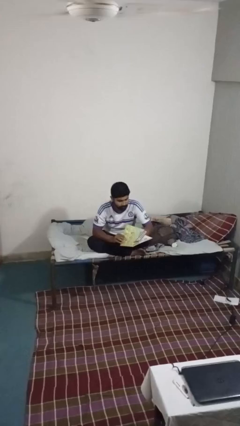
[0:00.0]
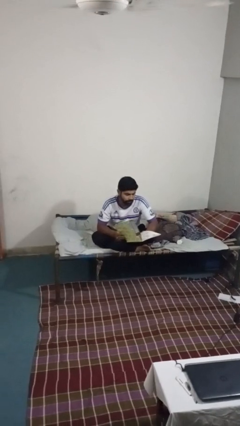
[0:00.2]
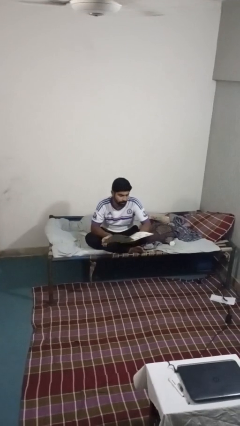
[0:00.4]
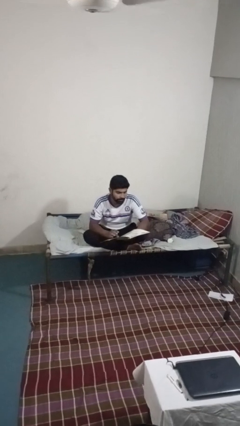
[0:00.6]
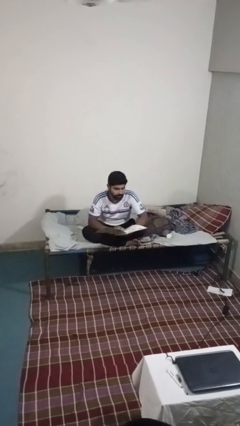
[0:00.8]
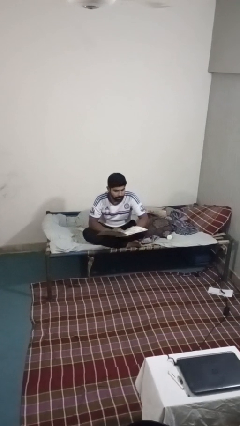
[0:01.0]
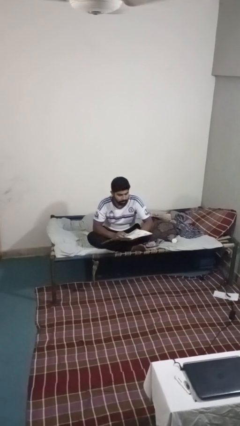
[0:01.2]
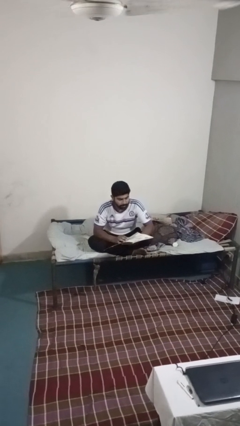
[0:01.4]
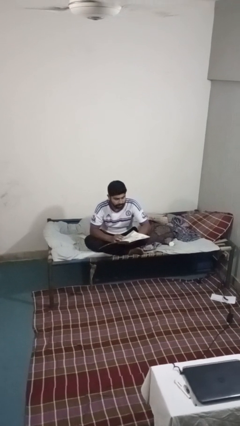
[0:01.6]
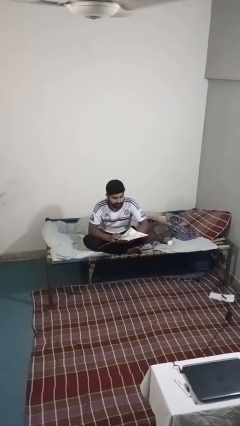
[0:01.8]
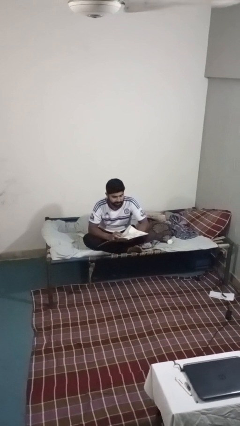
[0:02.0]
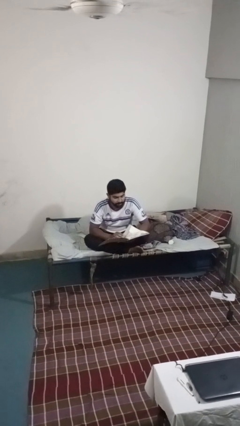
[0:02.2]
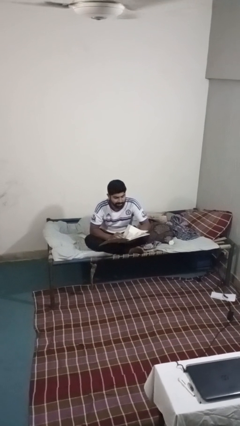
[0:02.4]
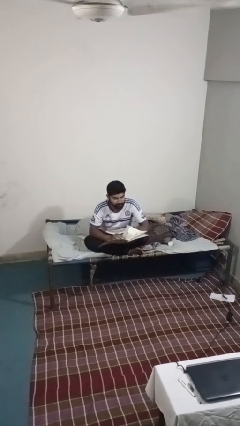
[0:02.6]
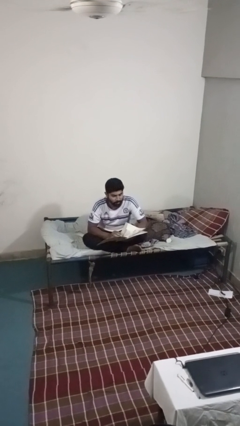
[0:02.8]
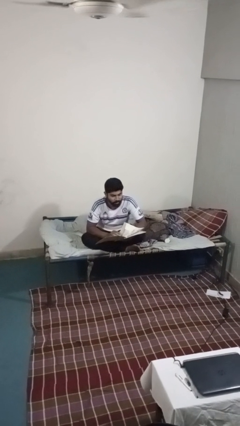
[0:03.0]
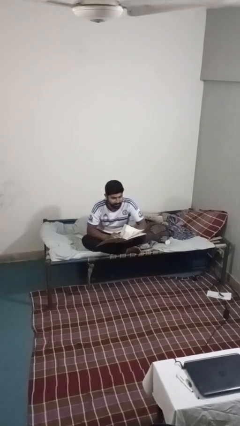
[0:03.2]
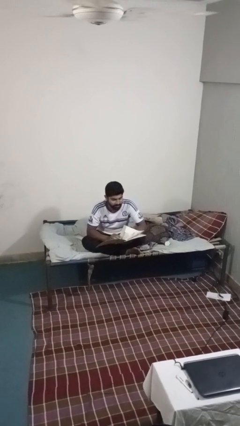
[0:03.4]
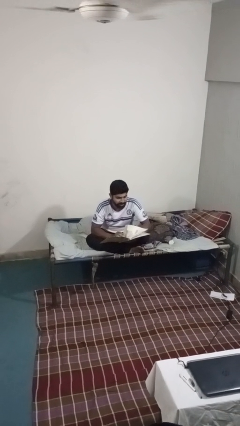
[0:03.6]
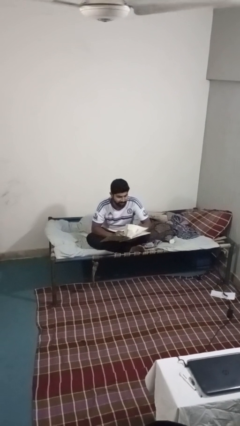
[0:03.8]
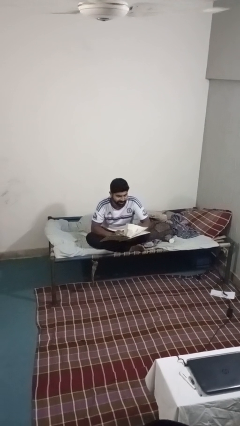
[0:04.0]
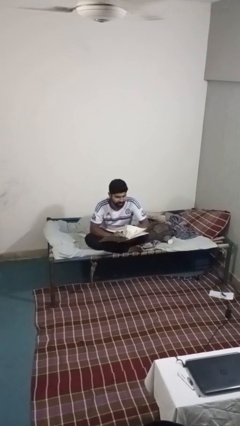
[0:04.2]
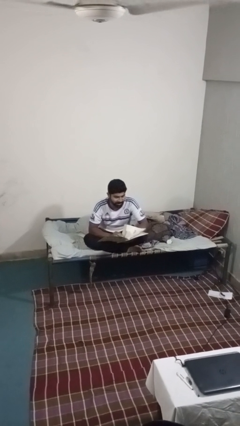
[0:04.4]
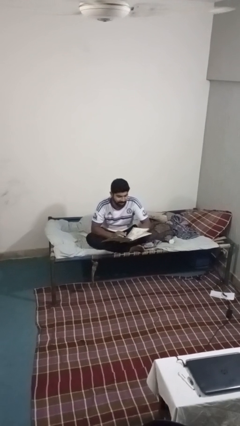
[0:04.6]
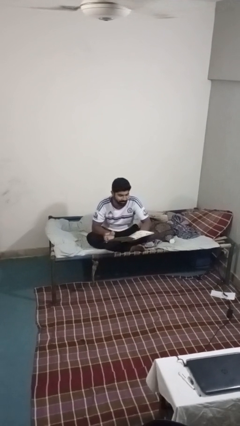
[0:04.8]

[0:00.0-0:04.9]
person reads magazine

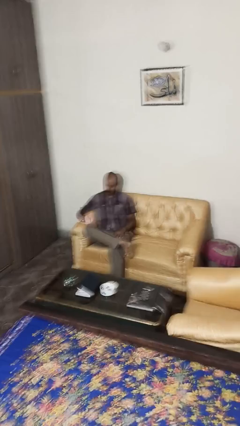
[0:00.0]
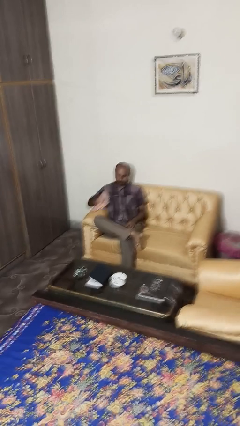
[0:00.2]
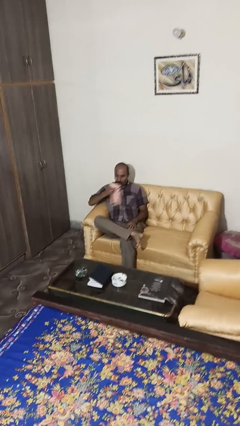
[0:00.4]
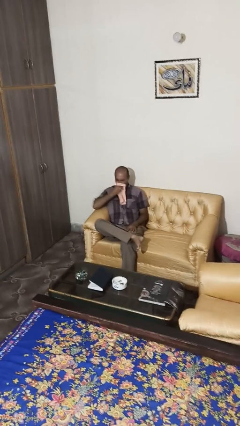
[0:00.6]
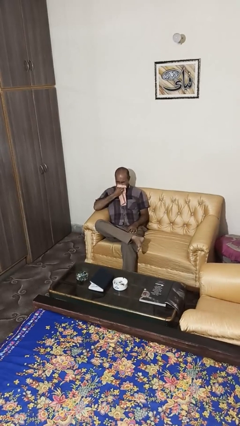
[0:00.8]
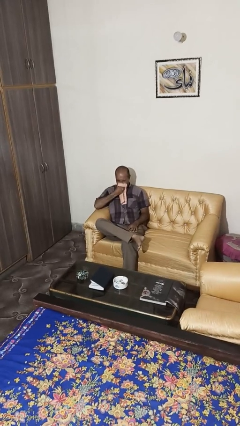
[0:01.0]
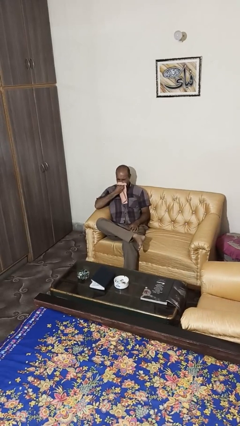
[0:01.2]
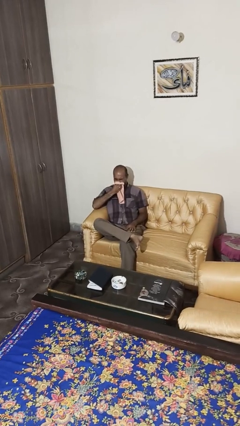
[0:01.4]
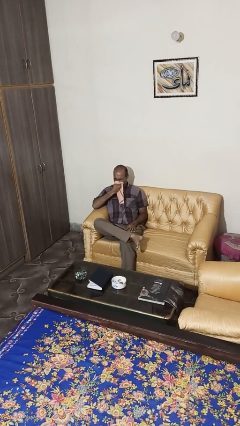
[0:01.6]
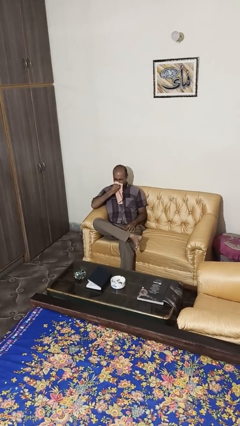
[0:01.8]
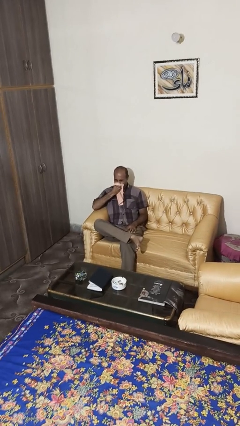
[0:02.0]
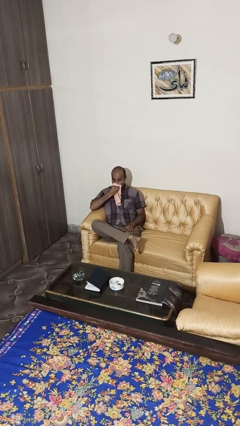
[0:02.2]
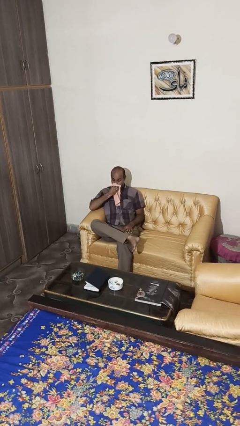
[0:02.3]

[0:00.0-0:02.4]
person blows nose

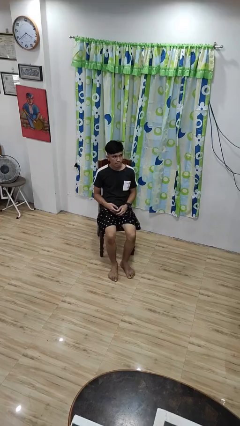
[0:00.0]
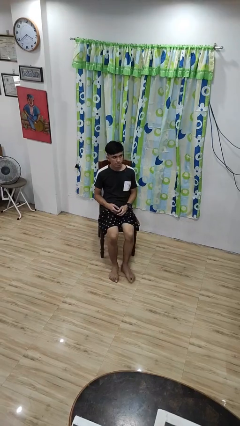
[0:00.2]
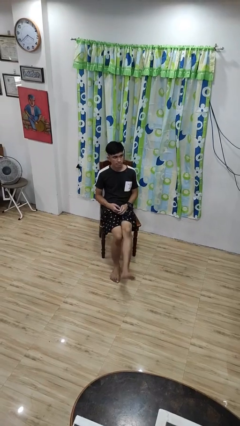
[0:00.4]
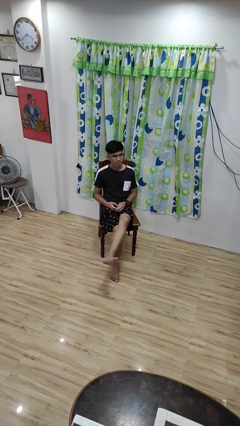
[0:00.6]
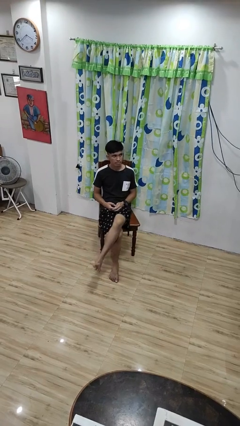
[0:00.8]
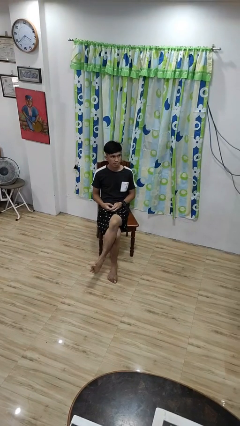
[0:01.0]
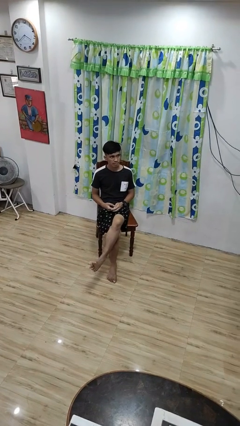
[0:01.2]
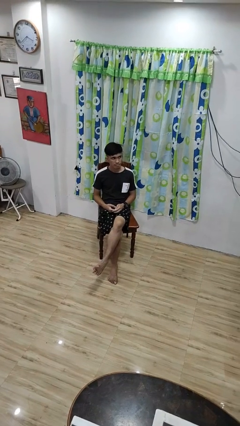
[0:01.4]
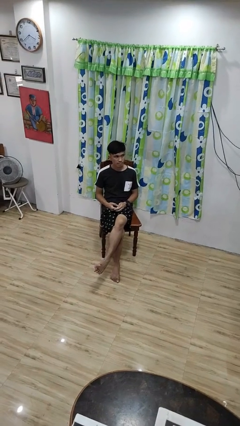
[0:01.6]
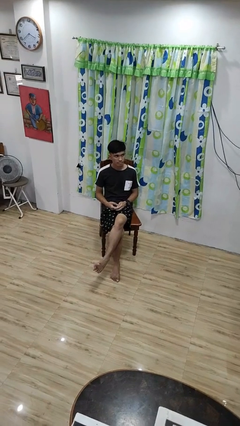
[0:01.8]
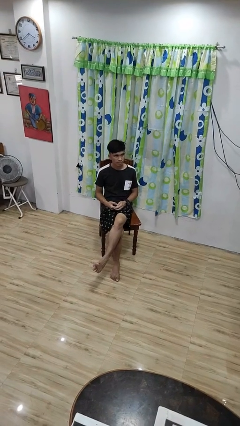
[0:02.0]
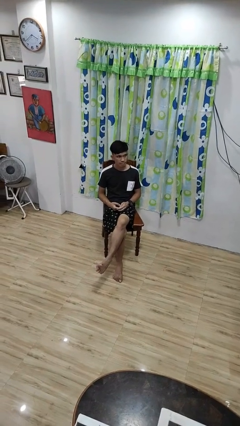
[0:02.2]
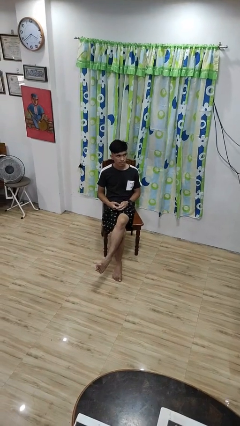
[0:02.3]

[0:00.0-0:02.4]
person crosses legs

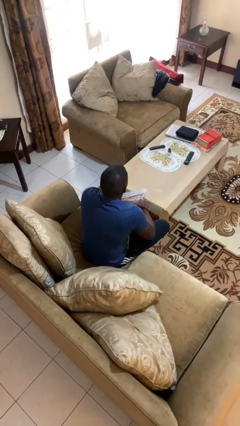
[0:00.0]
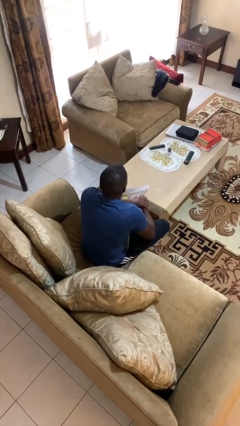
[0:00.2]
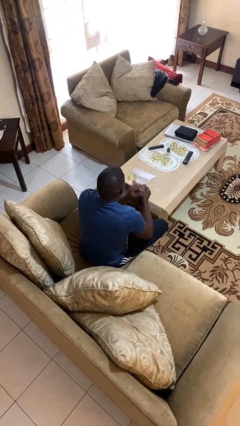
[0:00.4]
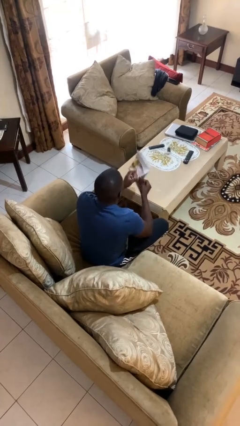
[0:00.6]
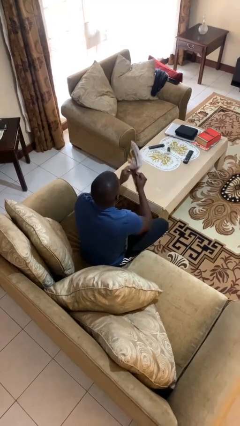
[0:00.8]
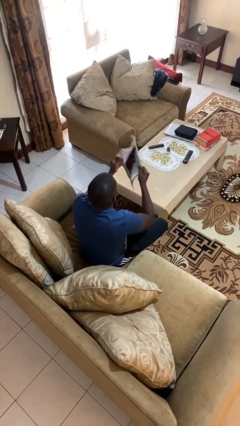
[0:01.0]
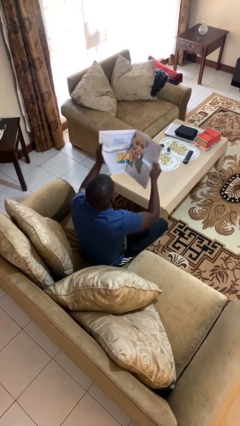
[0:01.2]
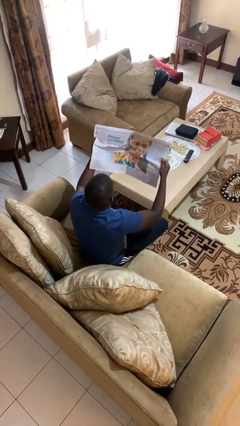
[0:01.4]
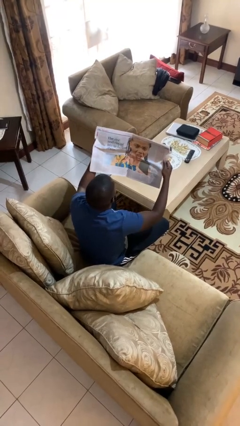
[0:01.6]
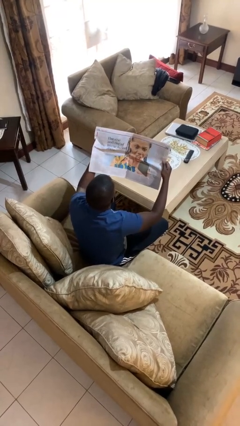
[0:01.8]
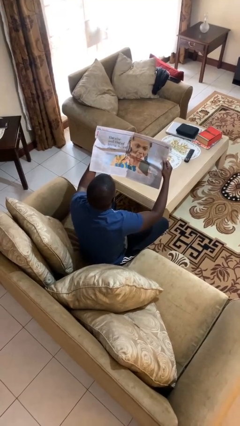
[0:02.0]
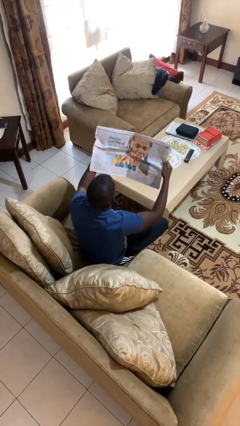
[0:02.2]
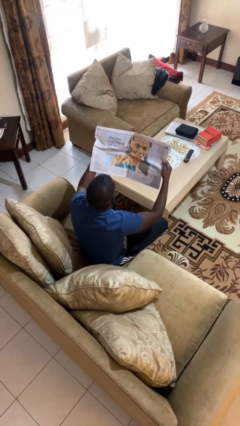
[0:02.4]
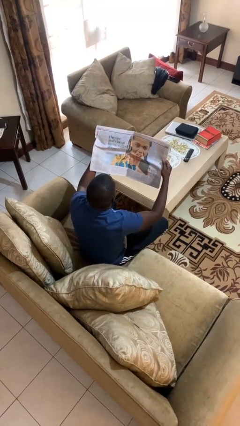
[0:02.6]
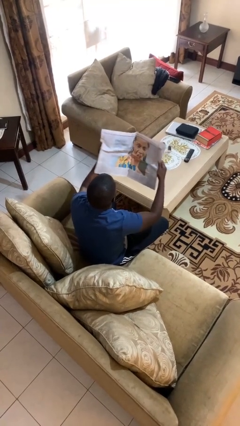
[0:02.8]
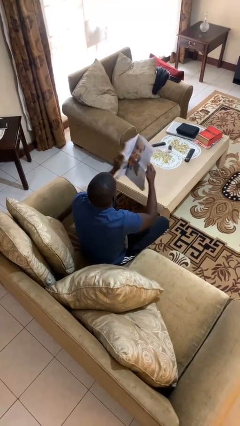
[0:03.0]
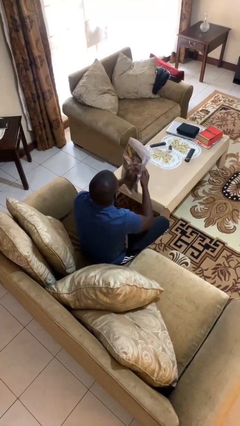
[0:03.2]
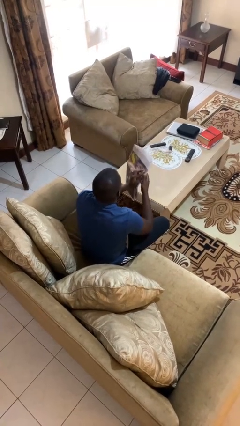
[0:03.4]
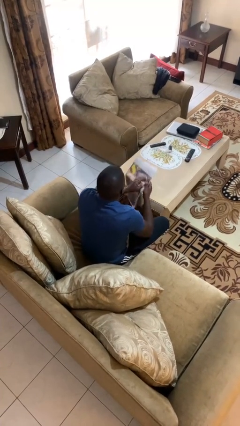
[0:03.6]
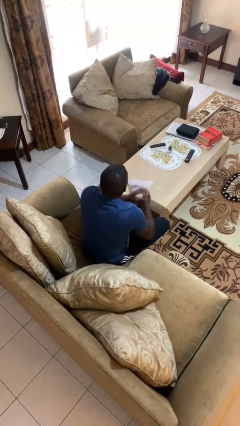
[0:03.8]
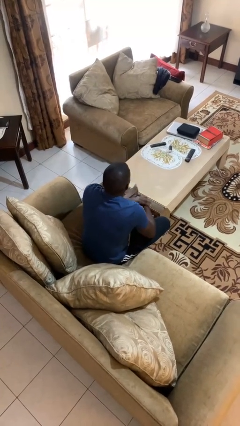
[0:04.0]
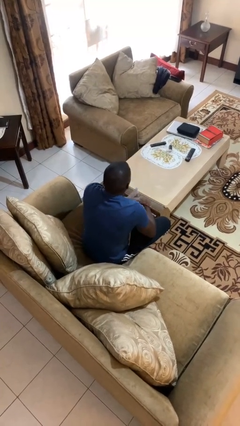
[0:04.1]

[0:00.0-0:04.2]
person reads newspaper

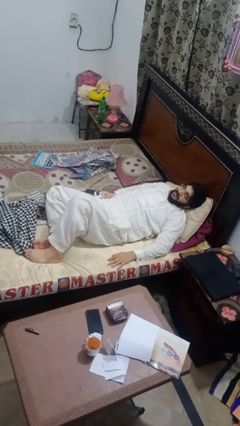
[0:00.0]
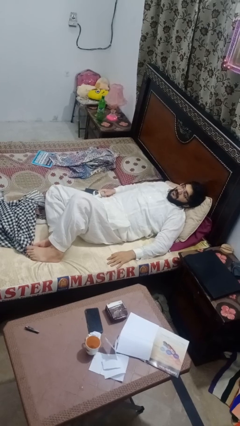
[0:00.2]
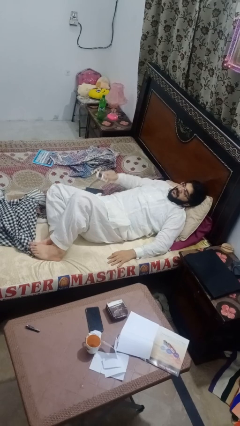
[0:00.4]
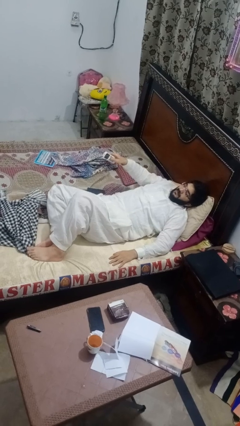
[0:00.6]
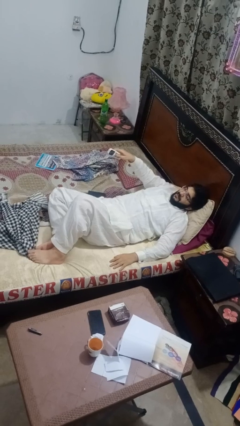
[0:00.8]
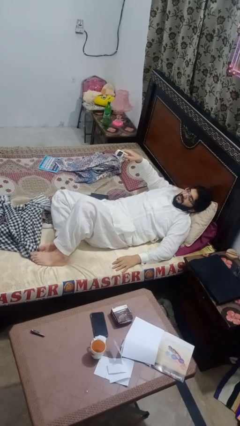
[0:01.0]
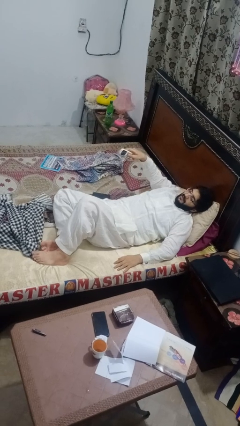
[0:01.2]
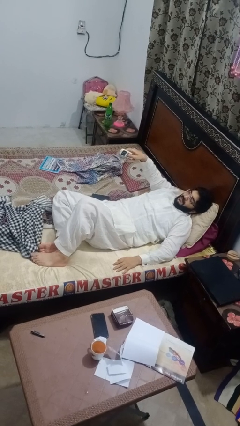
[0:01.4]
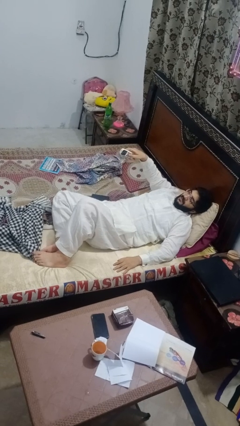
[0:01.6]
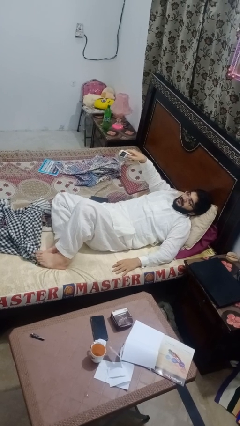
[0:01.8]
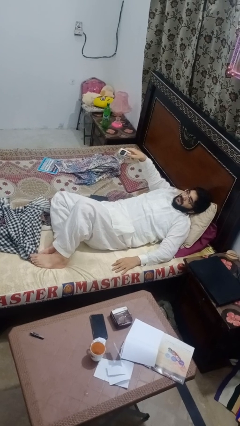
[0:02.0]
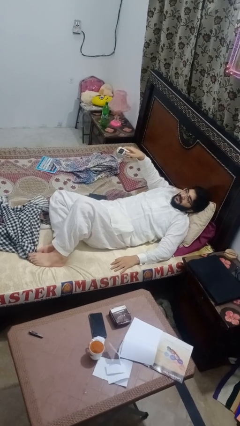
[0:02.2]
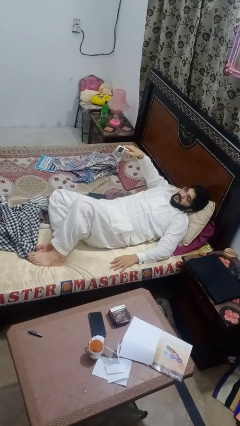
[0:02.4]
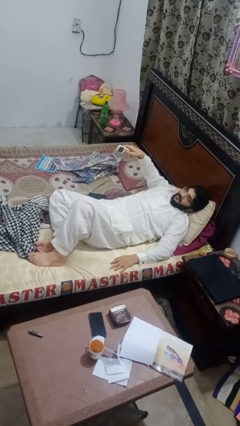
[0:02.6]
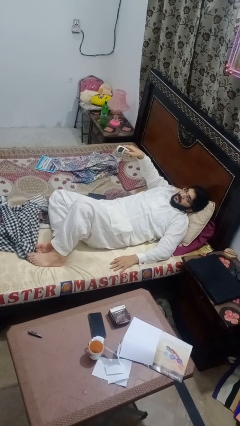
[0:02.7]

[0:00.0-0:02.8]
person uses television remote

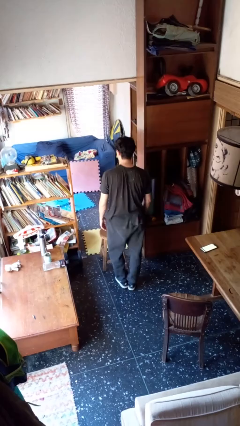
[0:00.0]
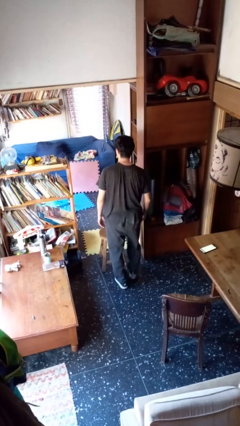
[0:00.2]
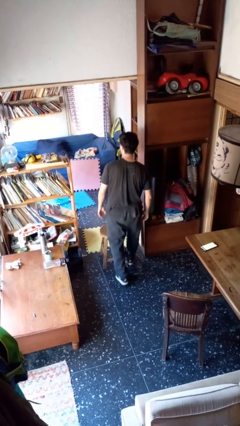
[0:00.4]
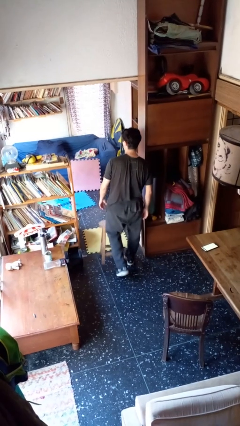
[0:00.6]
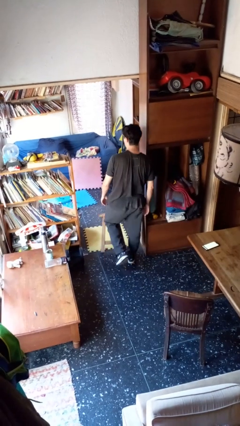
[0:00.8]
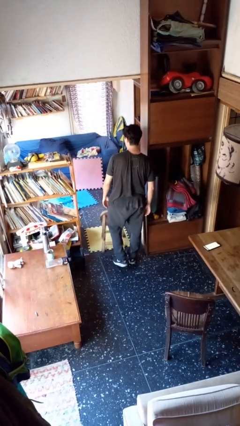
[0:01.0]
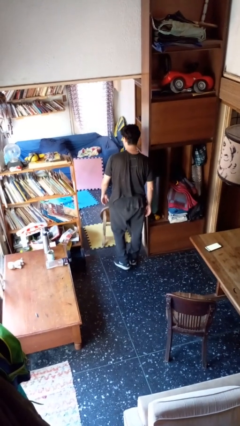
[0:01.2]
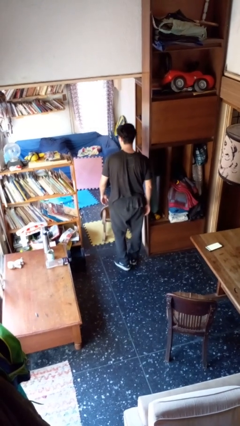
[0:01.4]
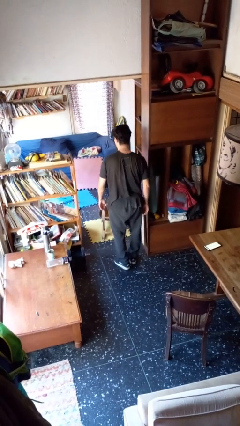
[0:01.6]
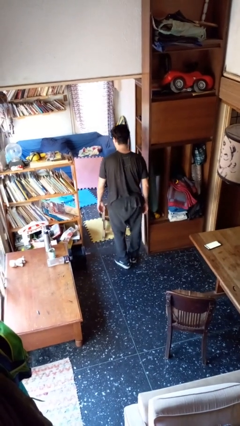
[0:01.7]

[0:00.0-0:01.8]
person knocks over furniture
